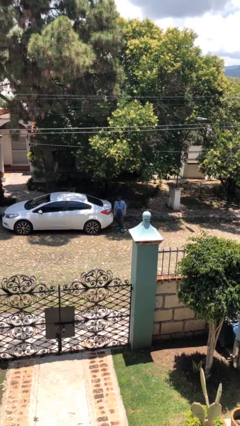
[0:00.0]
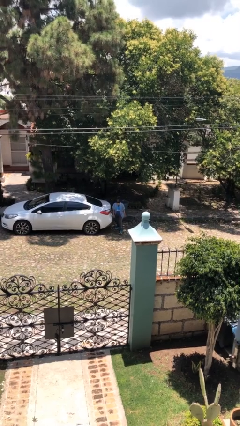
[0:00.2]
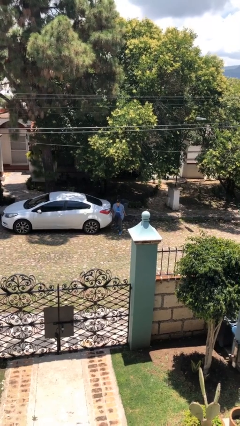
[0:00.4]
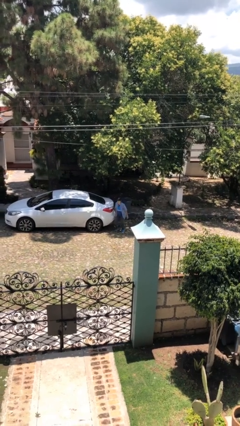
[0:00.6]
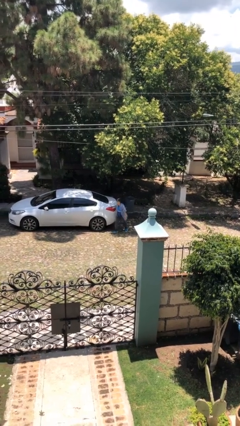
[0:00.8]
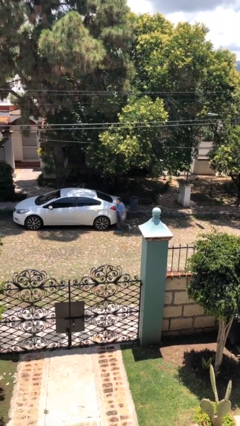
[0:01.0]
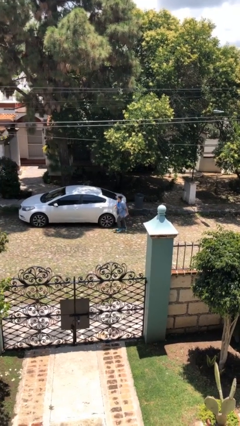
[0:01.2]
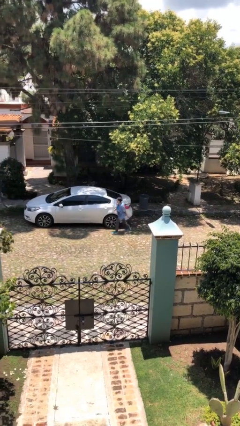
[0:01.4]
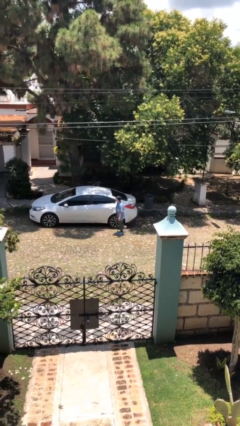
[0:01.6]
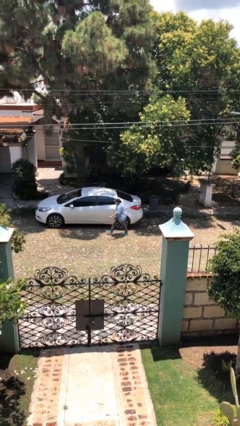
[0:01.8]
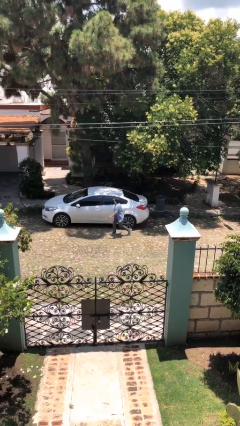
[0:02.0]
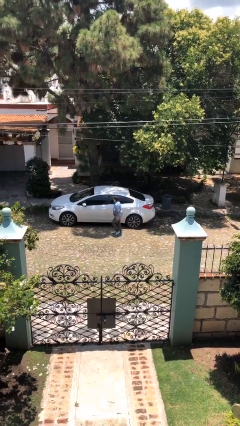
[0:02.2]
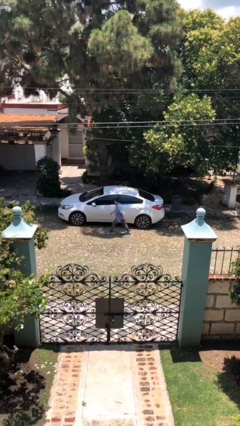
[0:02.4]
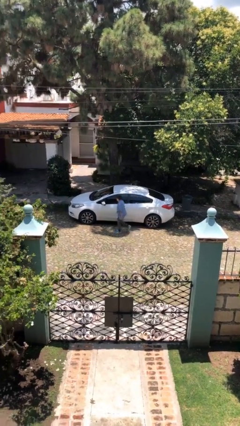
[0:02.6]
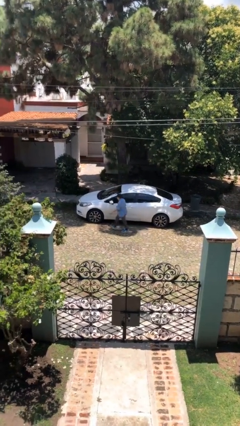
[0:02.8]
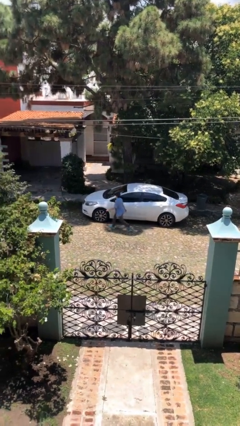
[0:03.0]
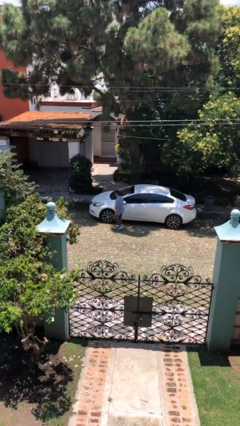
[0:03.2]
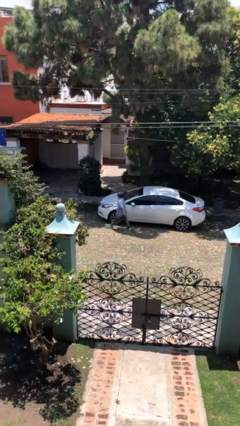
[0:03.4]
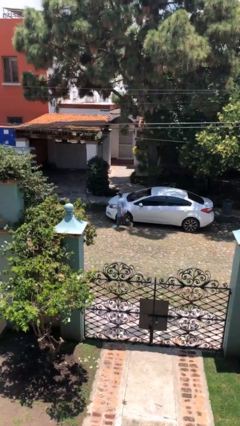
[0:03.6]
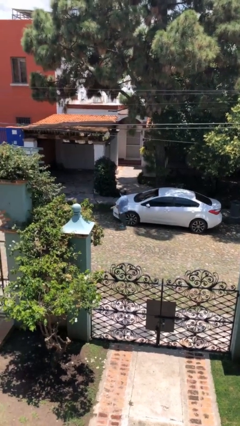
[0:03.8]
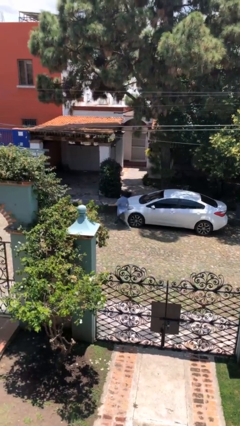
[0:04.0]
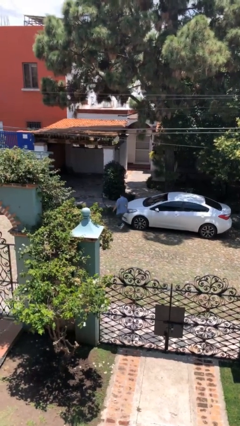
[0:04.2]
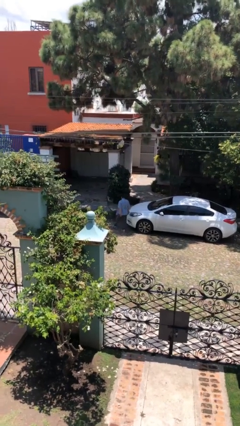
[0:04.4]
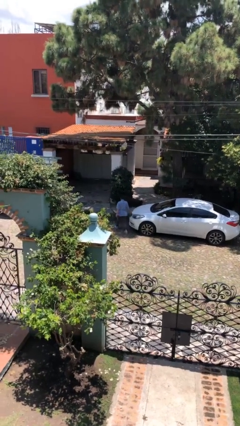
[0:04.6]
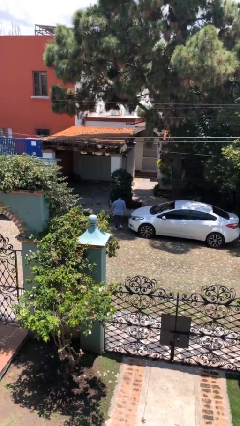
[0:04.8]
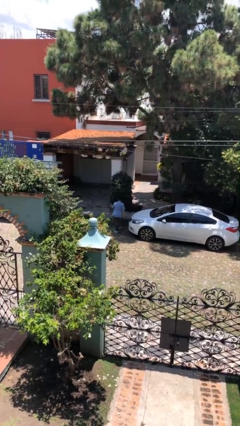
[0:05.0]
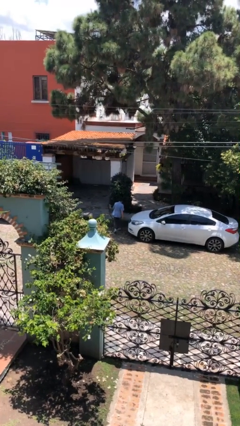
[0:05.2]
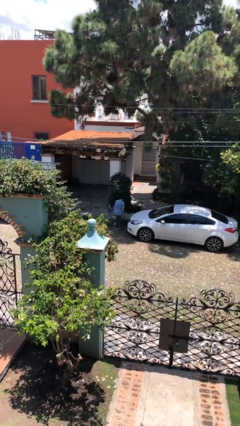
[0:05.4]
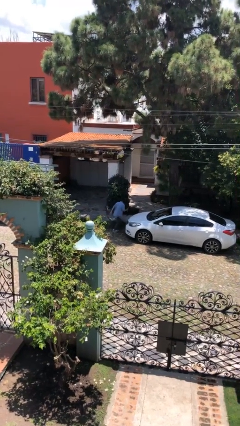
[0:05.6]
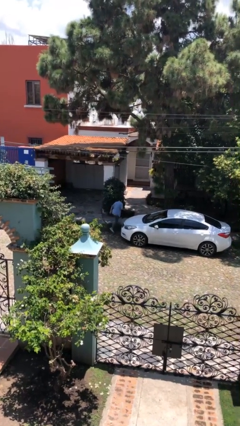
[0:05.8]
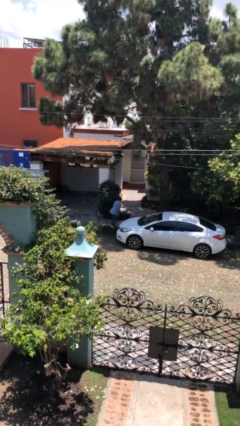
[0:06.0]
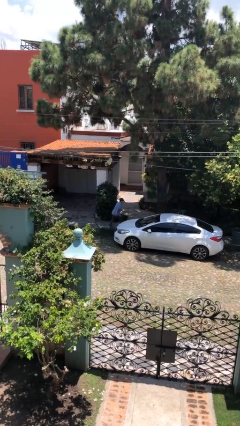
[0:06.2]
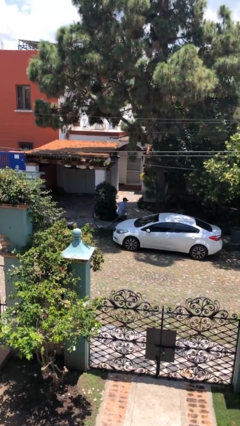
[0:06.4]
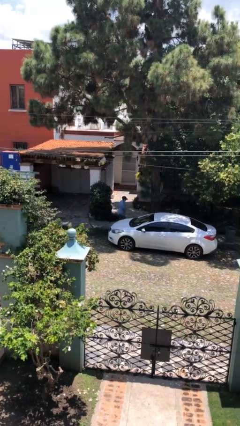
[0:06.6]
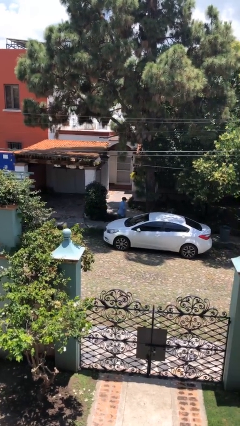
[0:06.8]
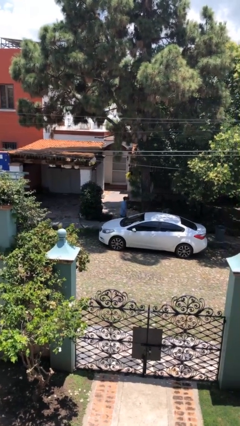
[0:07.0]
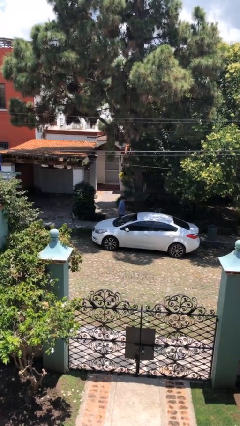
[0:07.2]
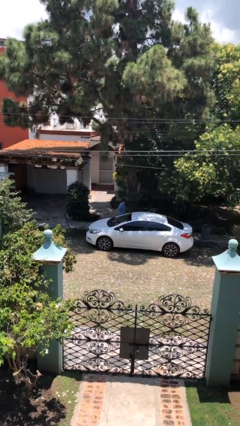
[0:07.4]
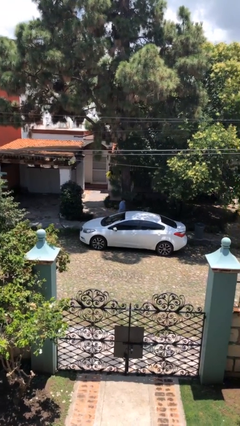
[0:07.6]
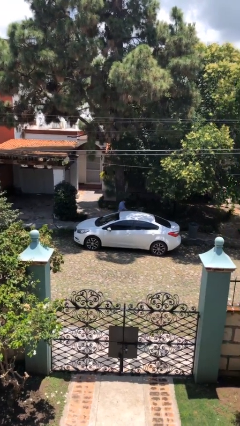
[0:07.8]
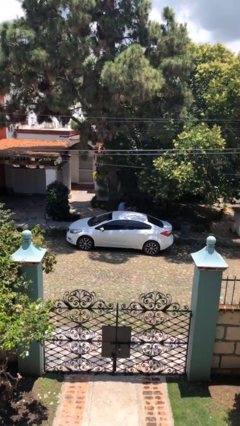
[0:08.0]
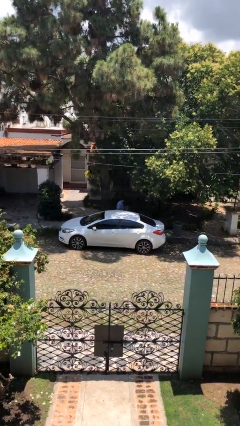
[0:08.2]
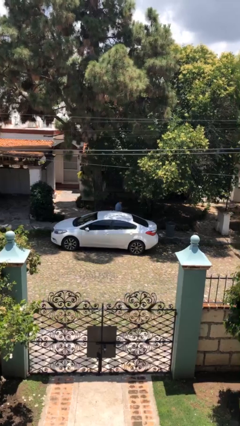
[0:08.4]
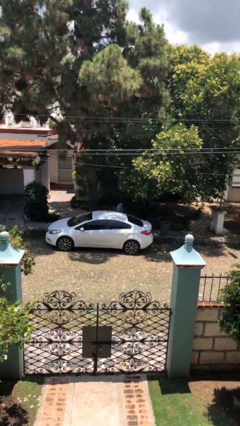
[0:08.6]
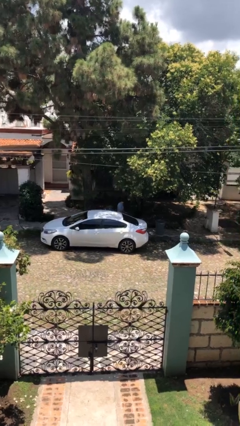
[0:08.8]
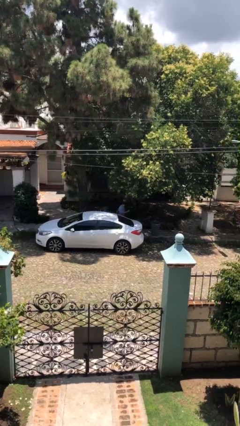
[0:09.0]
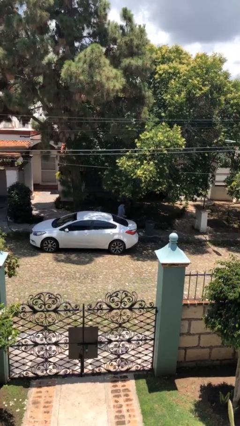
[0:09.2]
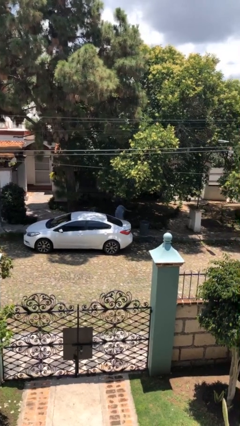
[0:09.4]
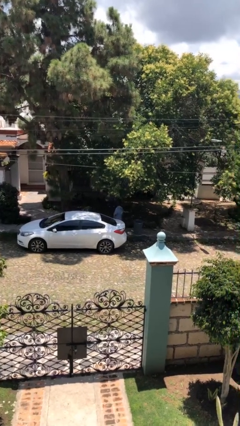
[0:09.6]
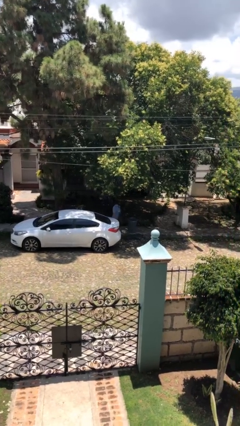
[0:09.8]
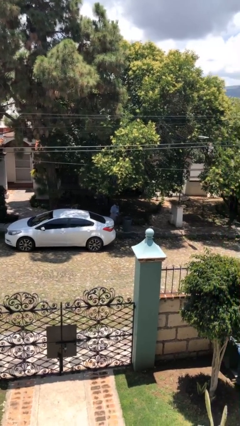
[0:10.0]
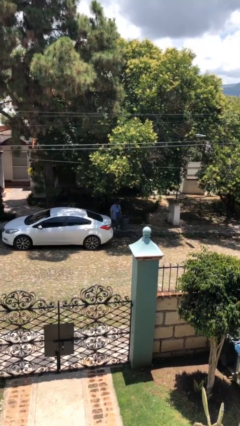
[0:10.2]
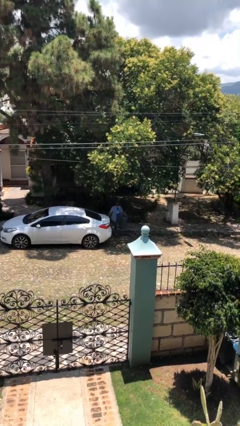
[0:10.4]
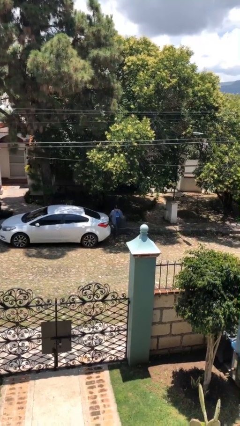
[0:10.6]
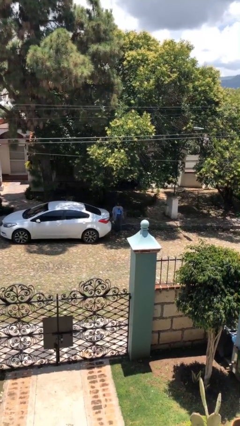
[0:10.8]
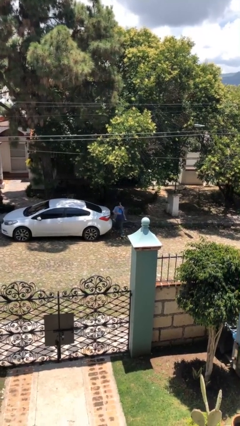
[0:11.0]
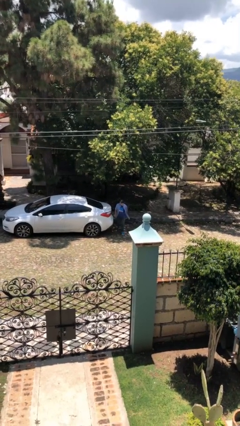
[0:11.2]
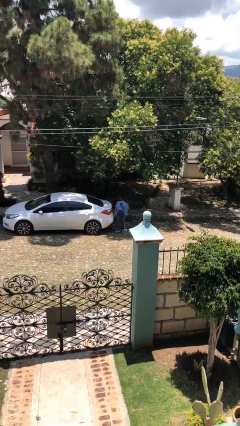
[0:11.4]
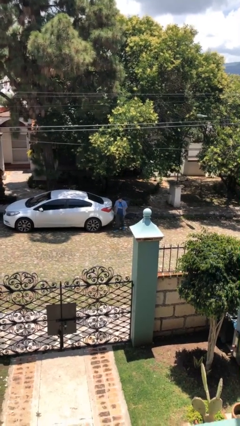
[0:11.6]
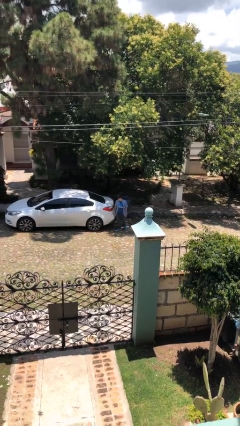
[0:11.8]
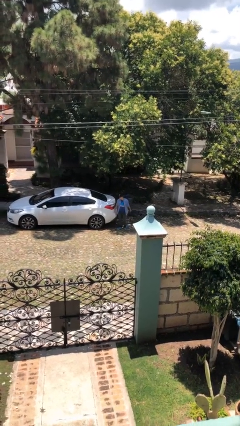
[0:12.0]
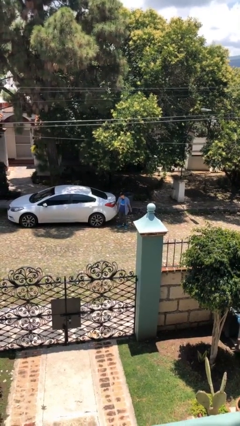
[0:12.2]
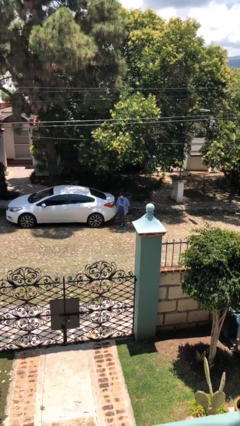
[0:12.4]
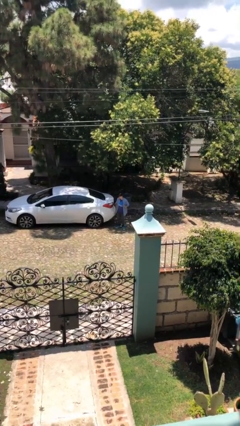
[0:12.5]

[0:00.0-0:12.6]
person walks around car

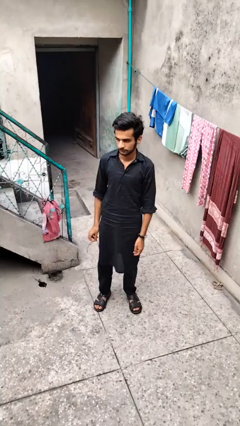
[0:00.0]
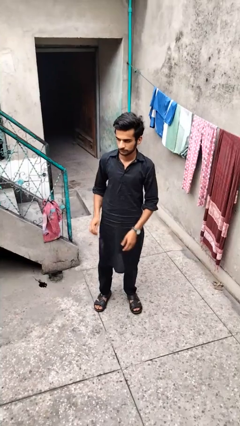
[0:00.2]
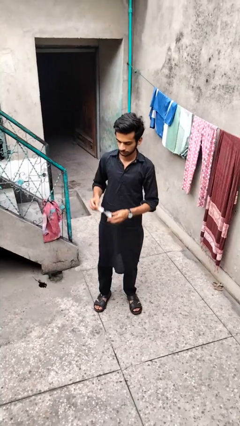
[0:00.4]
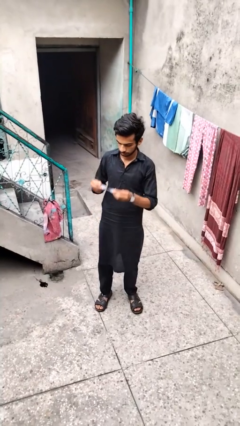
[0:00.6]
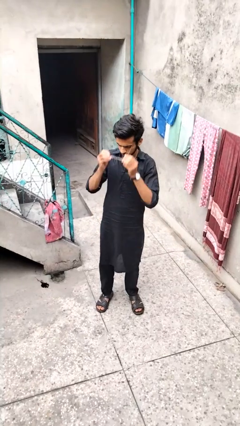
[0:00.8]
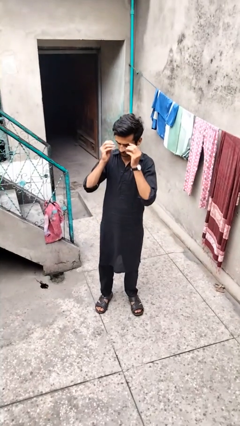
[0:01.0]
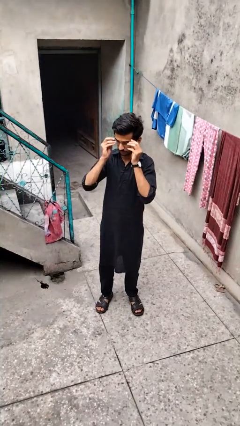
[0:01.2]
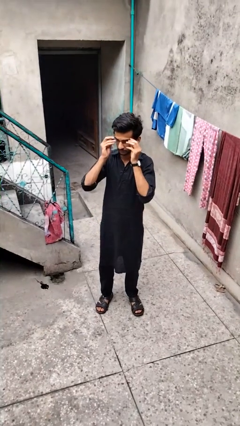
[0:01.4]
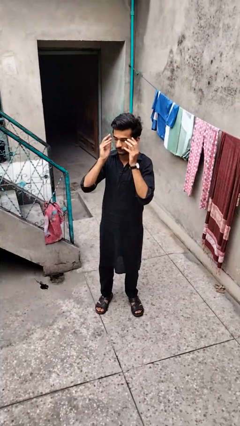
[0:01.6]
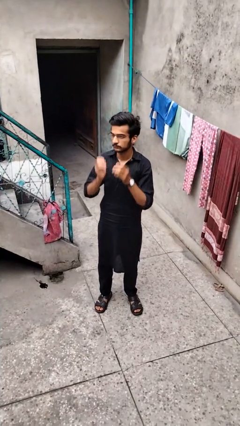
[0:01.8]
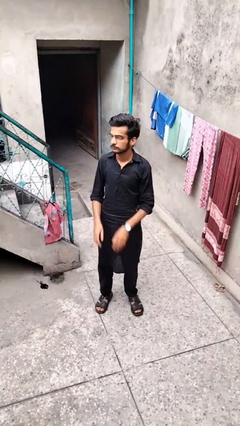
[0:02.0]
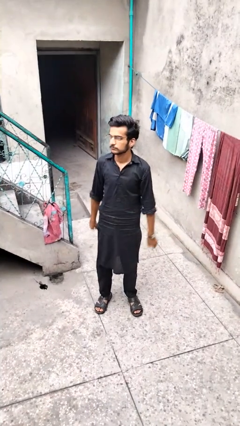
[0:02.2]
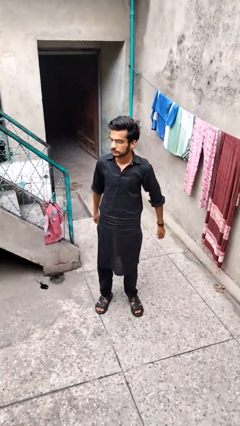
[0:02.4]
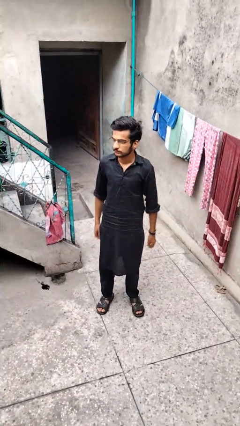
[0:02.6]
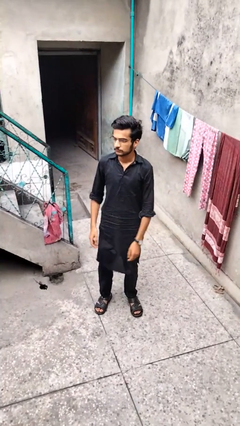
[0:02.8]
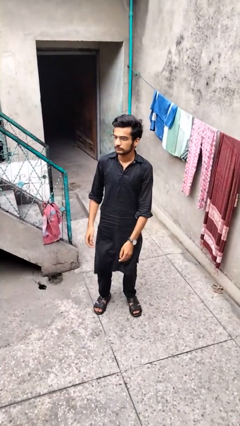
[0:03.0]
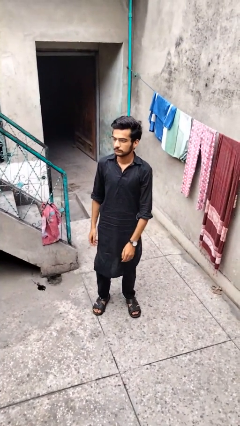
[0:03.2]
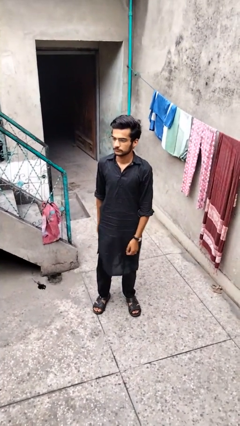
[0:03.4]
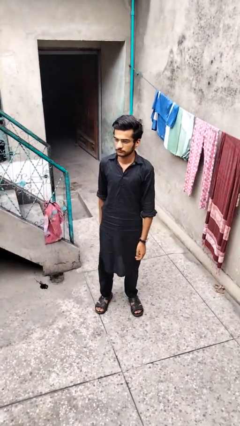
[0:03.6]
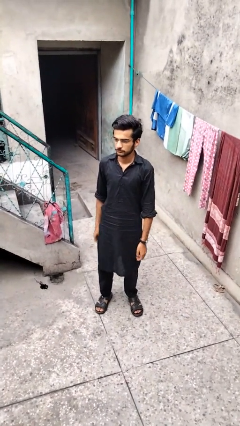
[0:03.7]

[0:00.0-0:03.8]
person puts on glasses

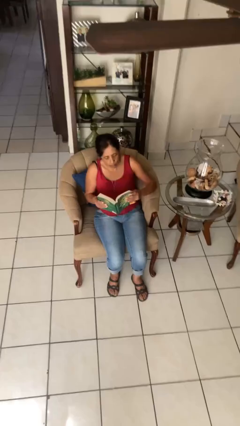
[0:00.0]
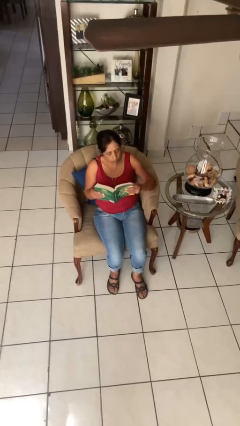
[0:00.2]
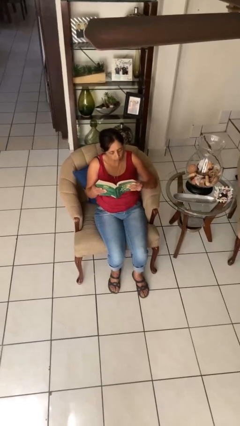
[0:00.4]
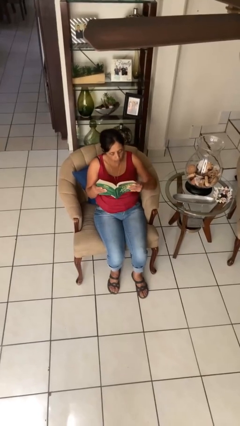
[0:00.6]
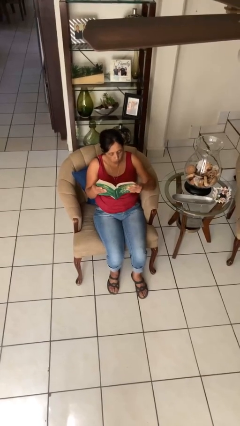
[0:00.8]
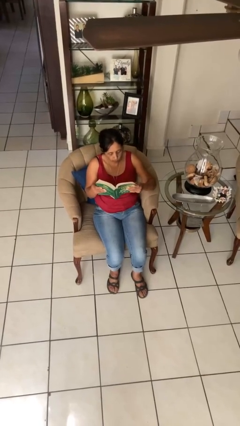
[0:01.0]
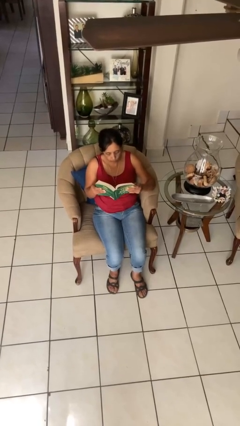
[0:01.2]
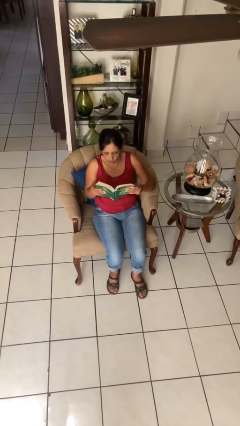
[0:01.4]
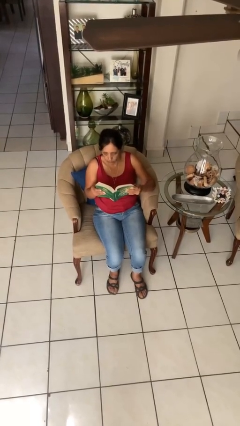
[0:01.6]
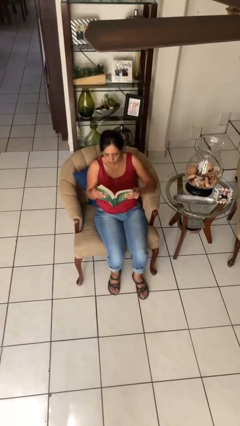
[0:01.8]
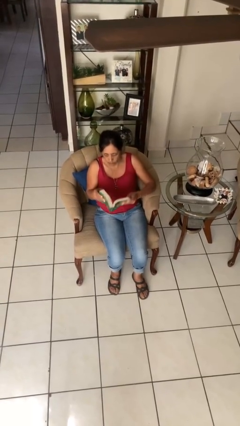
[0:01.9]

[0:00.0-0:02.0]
person reads book
